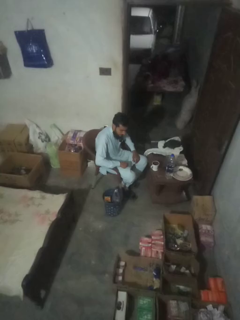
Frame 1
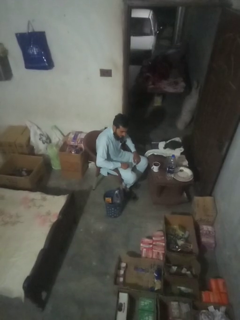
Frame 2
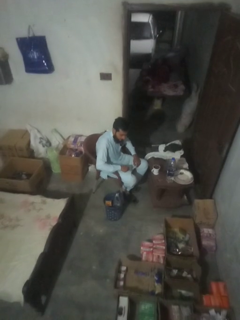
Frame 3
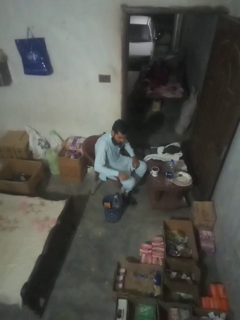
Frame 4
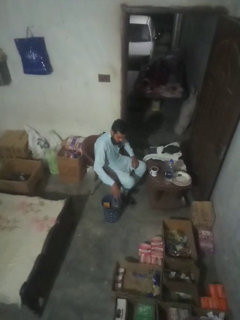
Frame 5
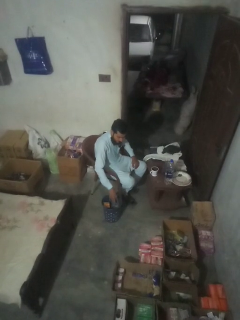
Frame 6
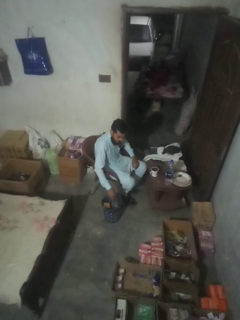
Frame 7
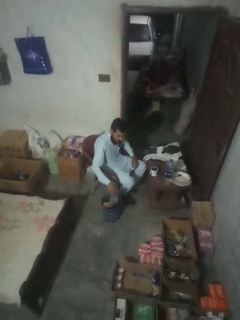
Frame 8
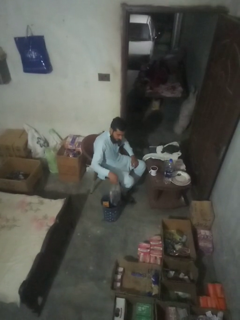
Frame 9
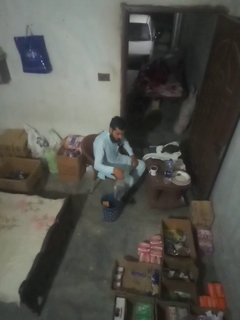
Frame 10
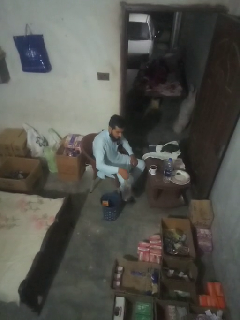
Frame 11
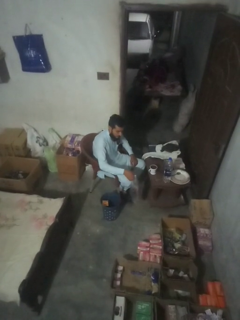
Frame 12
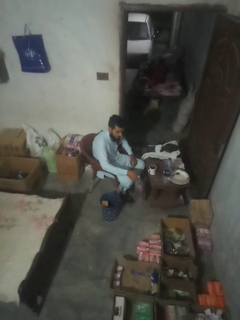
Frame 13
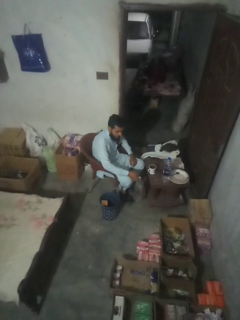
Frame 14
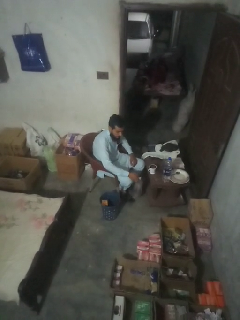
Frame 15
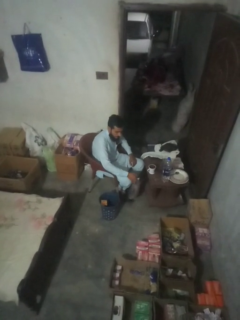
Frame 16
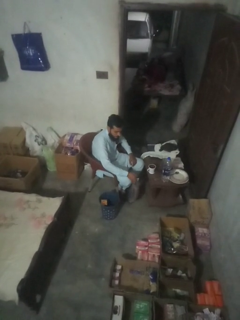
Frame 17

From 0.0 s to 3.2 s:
person inserts trashbag into trashcan

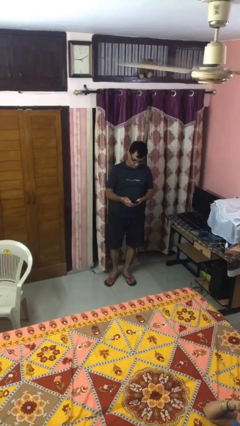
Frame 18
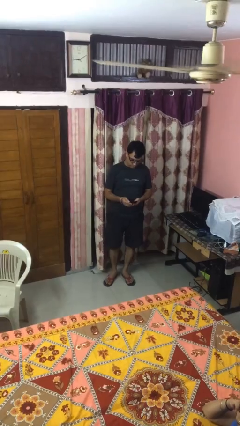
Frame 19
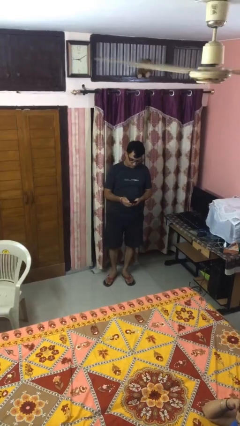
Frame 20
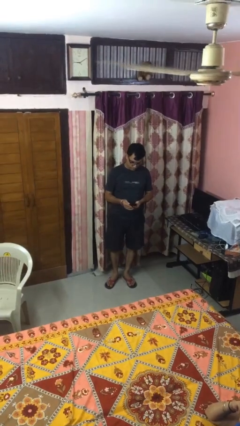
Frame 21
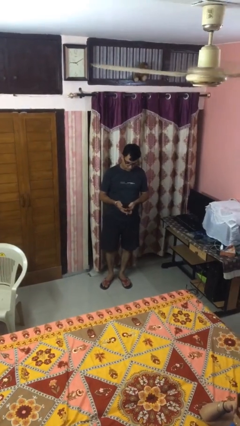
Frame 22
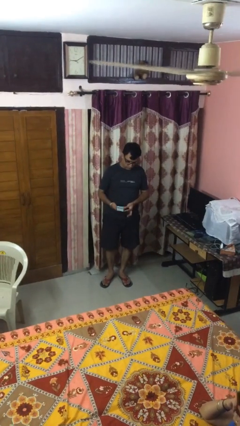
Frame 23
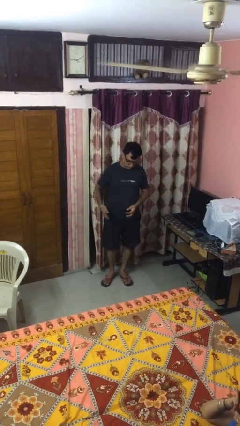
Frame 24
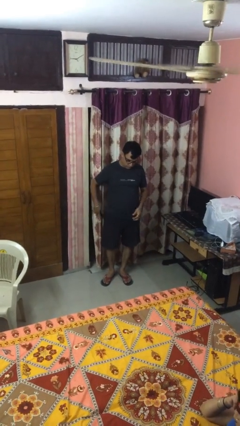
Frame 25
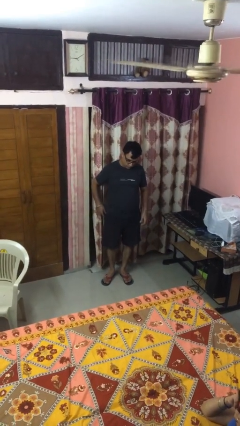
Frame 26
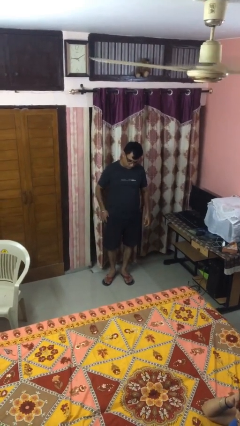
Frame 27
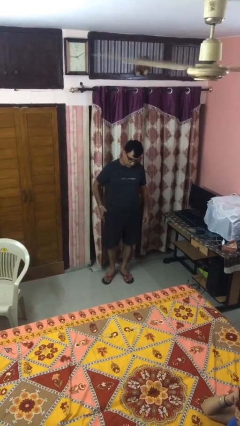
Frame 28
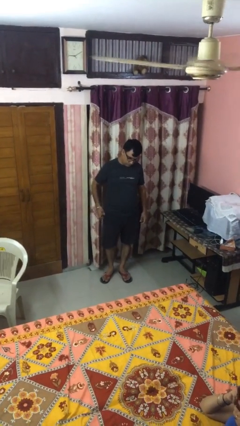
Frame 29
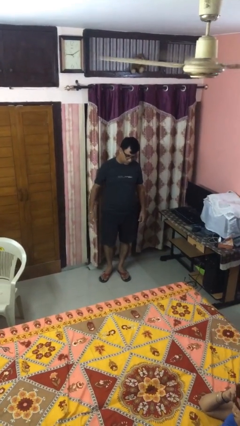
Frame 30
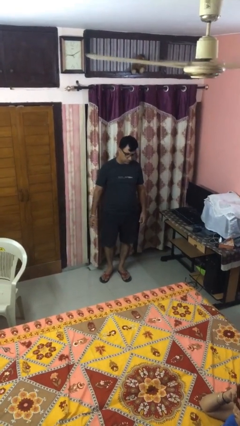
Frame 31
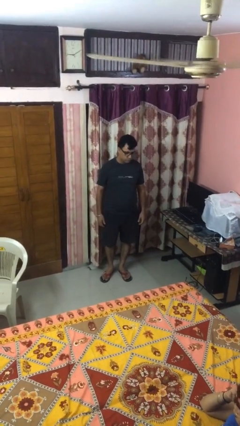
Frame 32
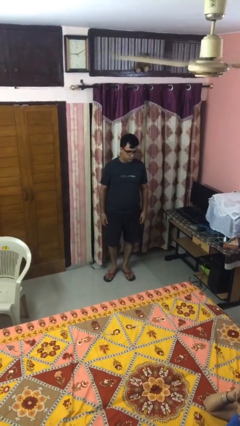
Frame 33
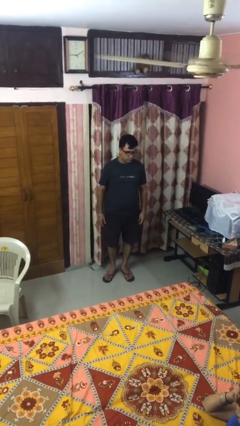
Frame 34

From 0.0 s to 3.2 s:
person puts phone into pocket

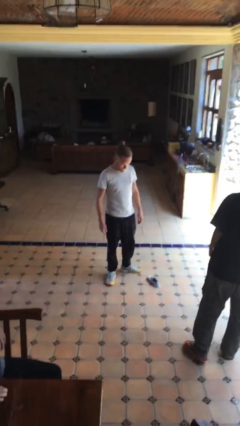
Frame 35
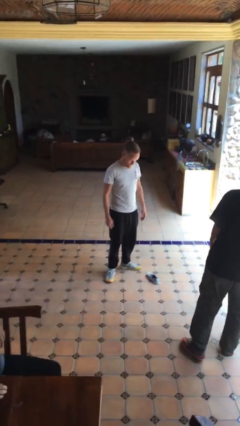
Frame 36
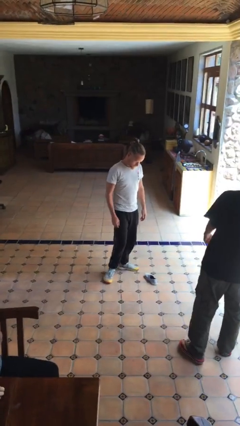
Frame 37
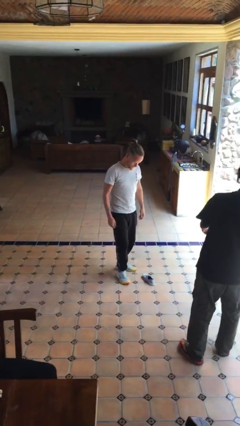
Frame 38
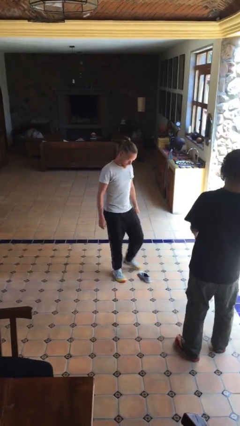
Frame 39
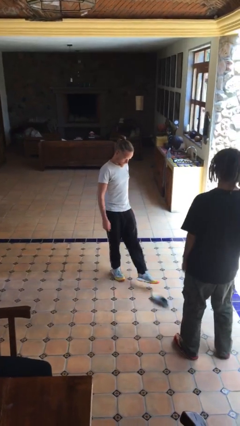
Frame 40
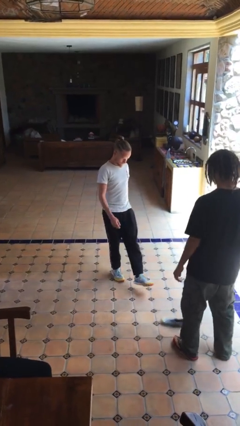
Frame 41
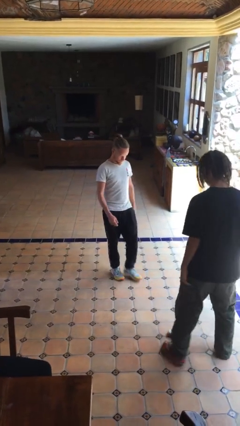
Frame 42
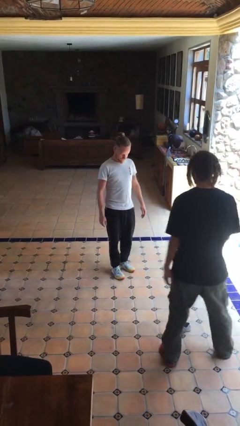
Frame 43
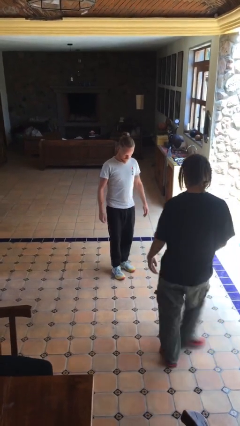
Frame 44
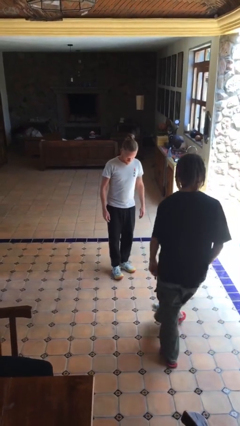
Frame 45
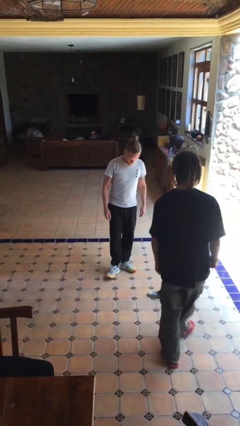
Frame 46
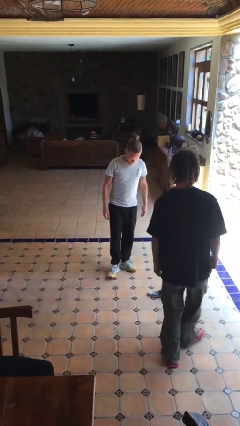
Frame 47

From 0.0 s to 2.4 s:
person kicks object to person

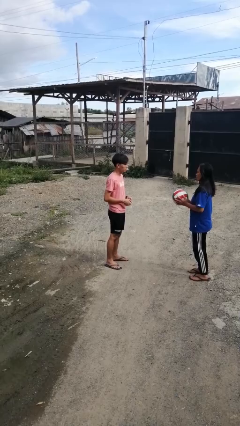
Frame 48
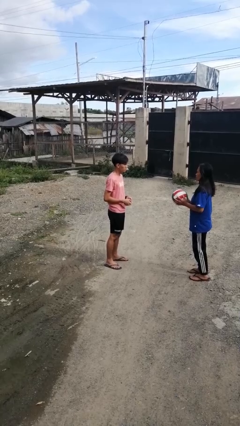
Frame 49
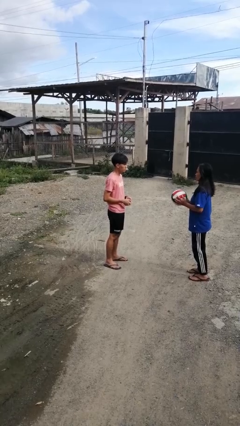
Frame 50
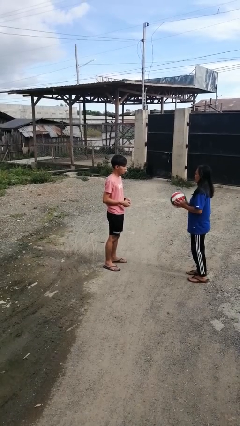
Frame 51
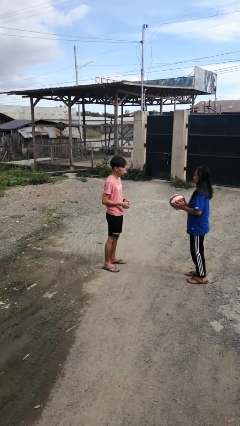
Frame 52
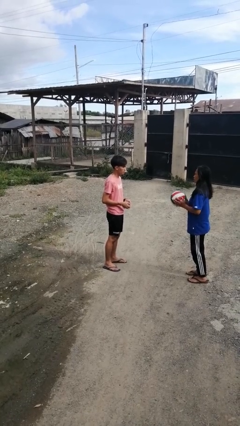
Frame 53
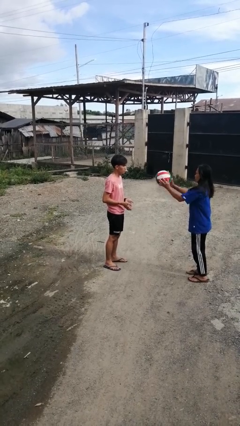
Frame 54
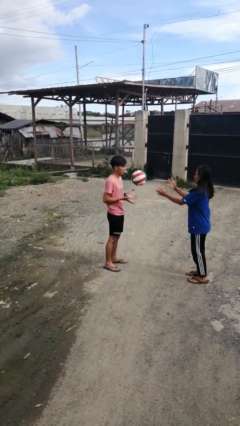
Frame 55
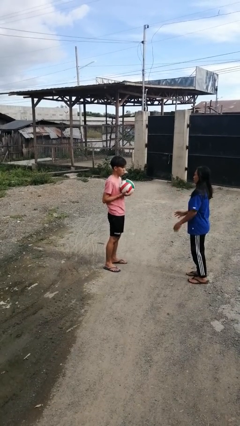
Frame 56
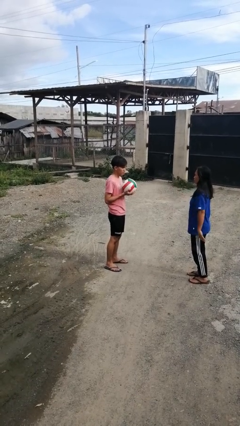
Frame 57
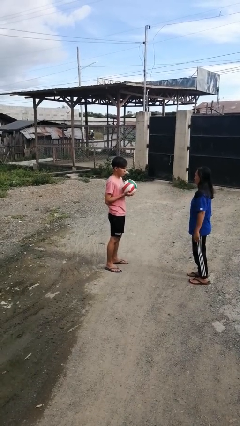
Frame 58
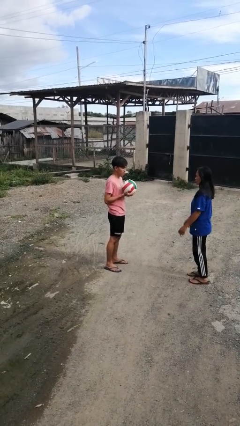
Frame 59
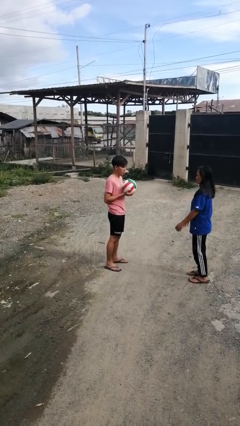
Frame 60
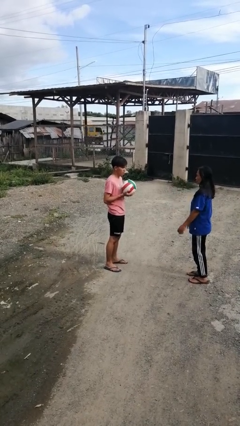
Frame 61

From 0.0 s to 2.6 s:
person catches object from person

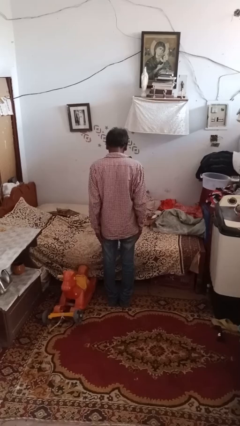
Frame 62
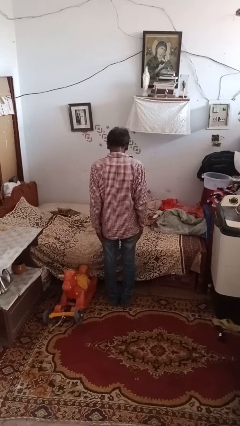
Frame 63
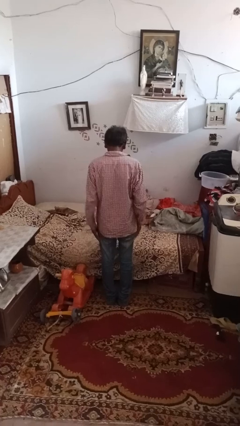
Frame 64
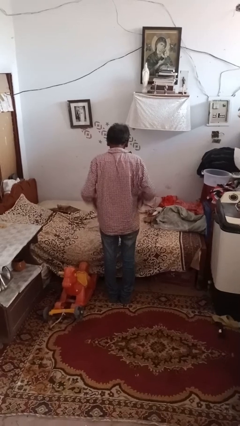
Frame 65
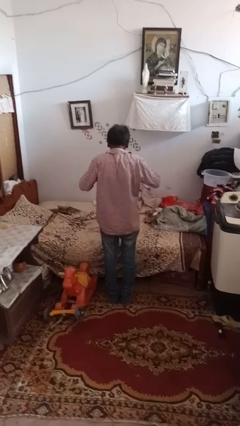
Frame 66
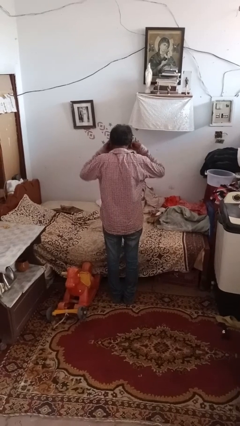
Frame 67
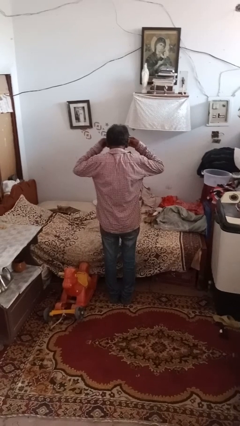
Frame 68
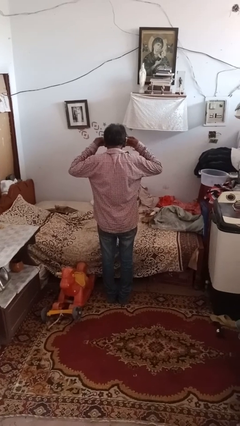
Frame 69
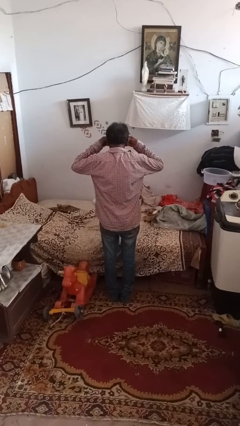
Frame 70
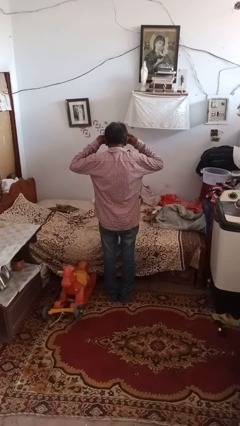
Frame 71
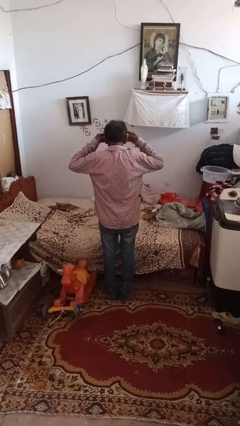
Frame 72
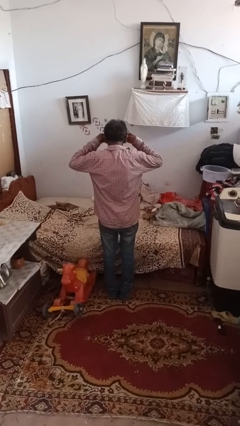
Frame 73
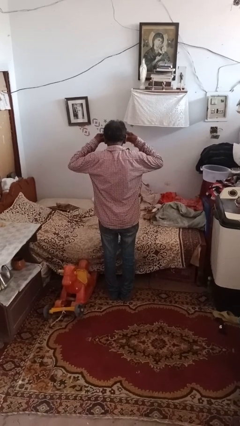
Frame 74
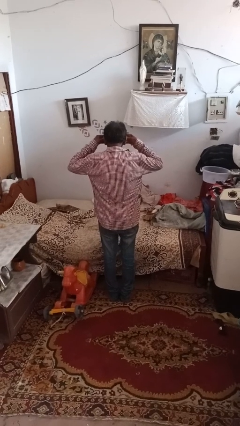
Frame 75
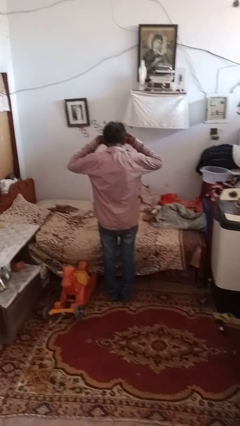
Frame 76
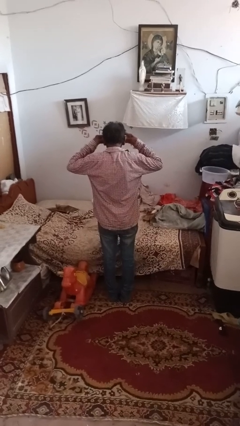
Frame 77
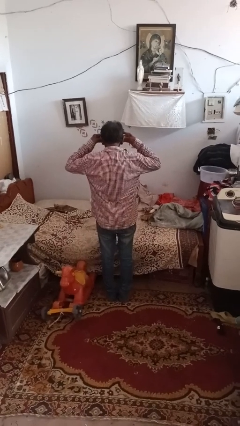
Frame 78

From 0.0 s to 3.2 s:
person rubs eyes

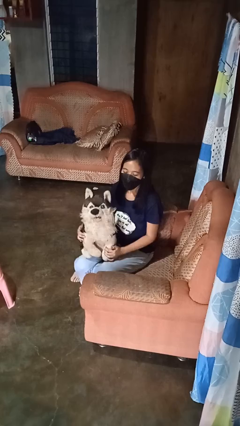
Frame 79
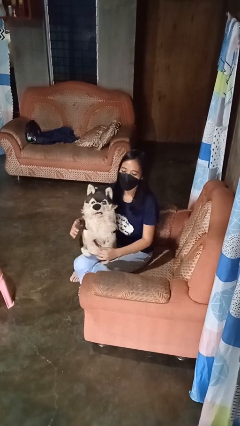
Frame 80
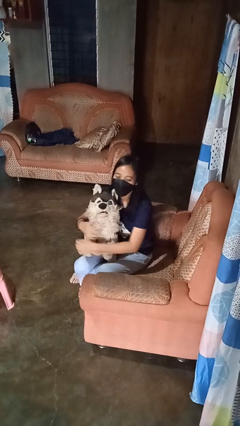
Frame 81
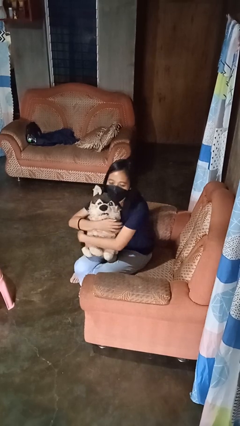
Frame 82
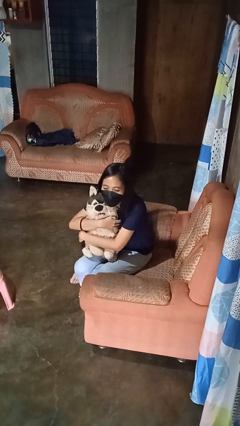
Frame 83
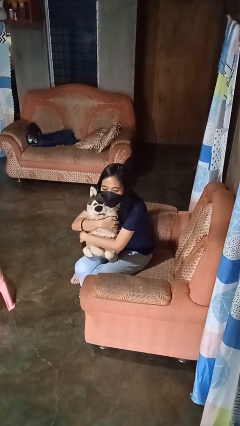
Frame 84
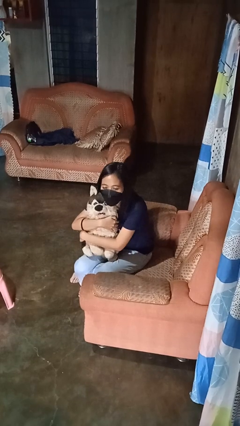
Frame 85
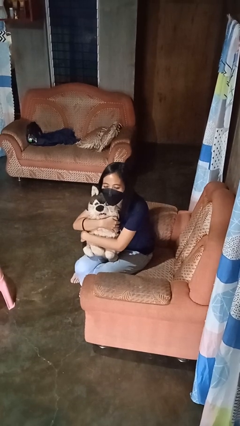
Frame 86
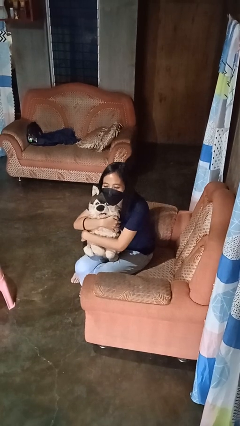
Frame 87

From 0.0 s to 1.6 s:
person hugs stuffed animal

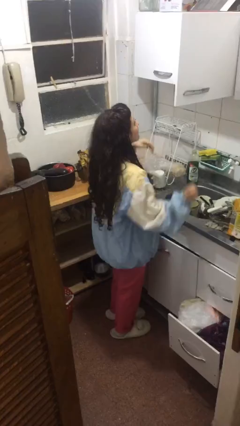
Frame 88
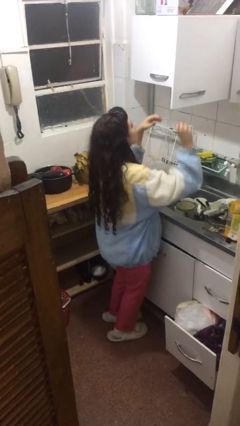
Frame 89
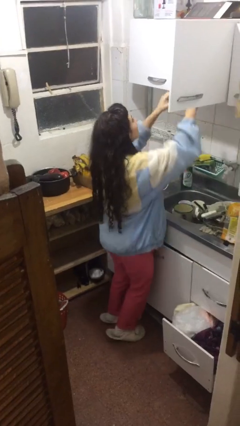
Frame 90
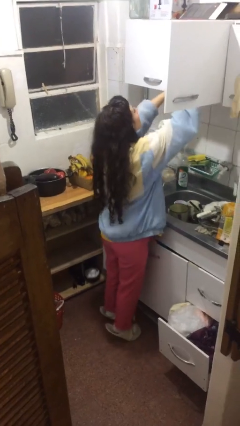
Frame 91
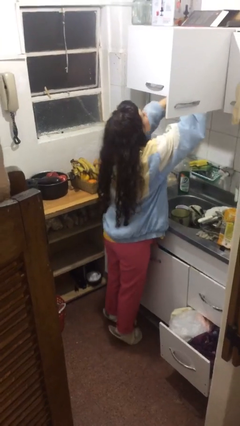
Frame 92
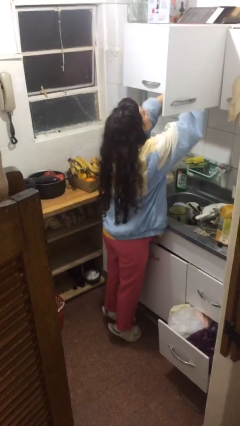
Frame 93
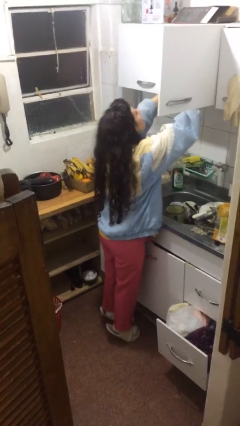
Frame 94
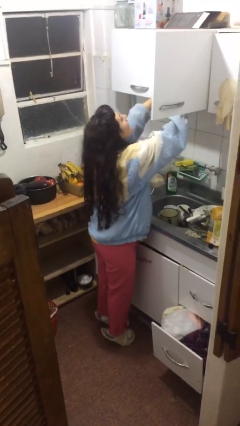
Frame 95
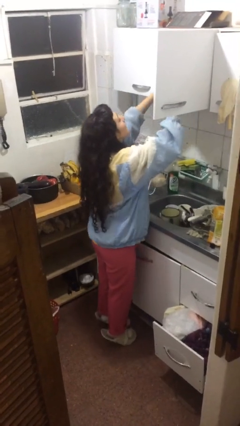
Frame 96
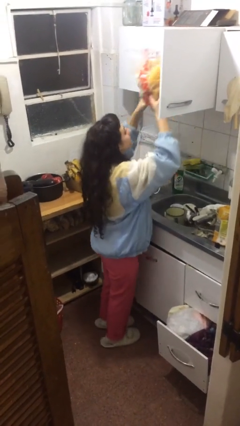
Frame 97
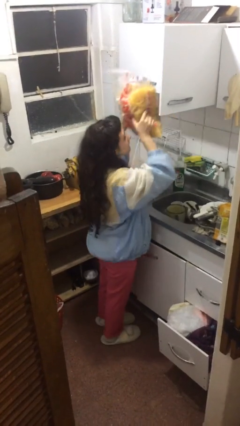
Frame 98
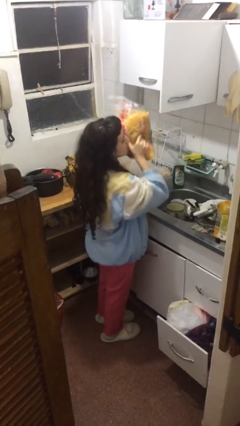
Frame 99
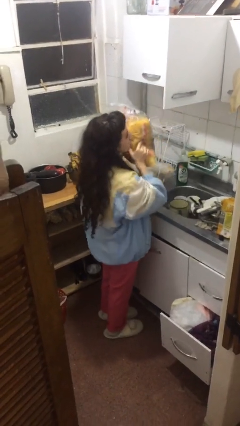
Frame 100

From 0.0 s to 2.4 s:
person picks up object from cabinet
